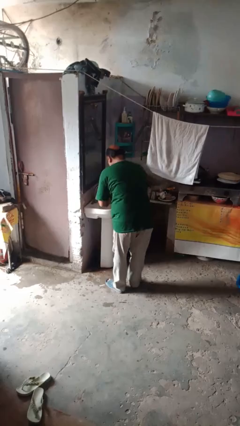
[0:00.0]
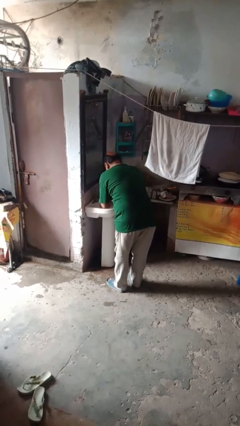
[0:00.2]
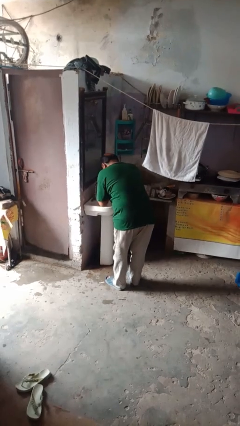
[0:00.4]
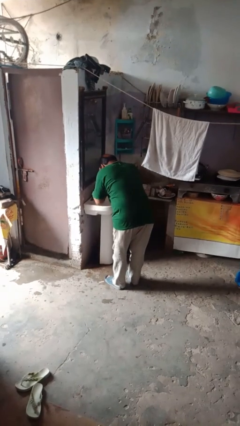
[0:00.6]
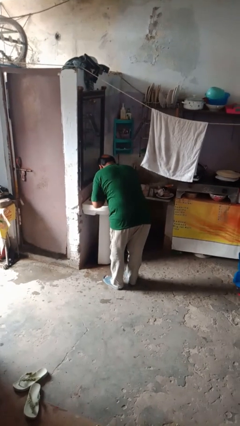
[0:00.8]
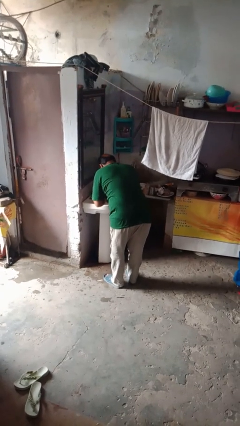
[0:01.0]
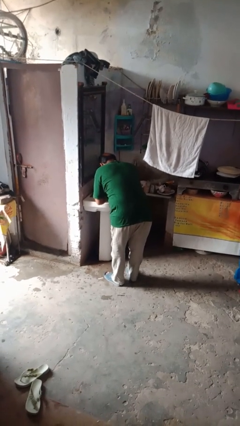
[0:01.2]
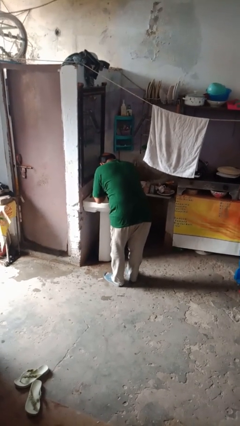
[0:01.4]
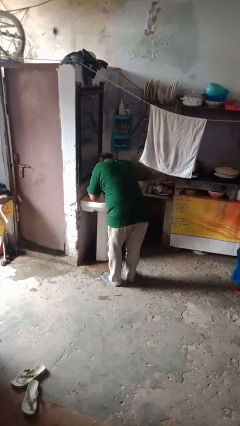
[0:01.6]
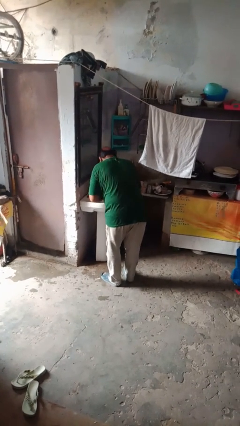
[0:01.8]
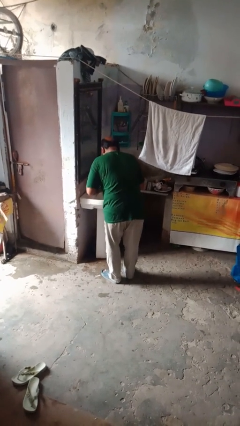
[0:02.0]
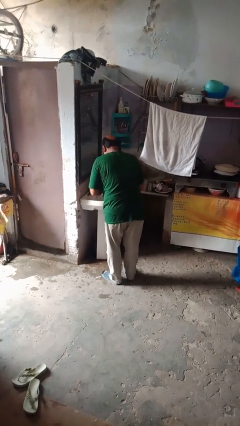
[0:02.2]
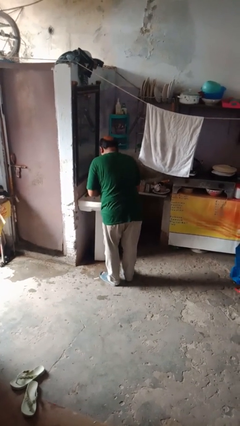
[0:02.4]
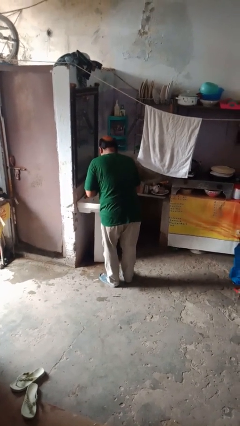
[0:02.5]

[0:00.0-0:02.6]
person washes face

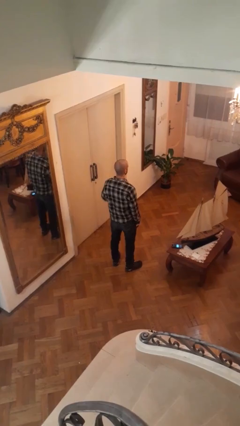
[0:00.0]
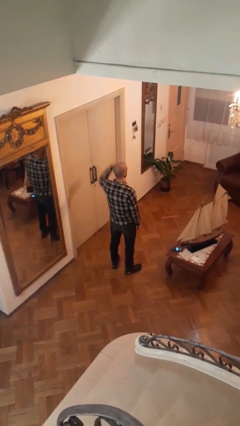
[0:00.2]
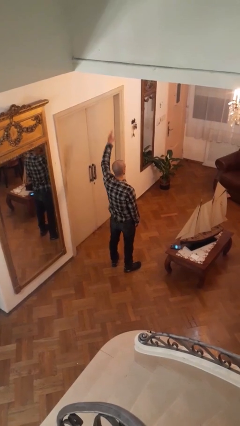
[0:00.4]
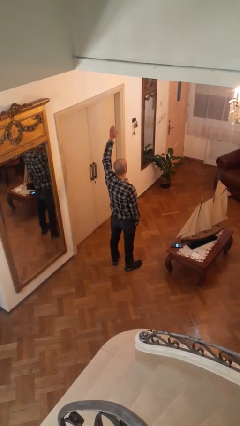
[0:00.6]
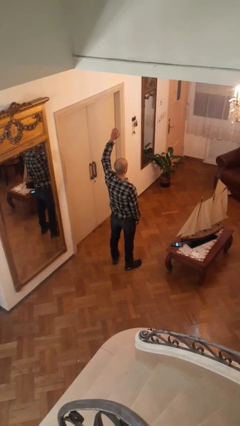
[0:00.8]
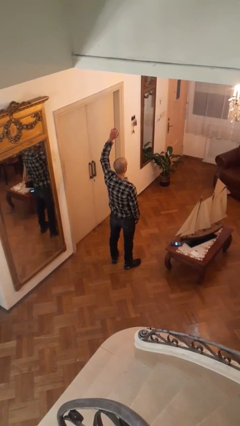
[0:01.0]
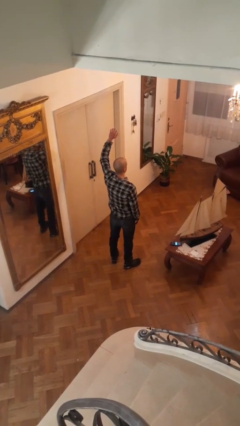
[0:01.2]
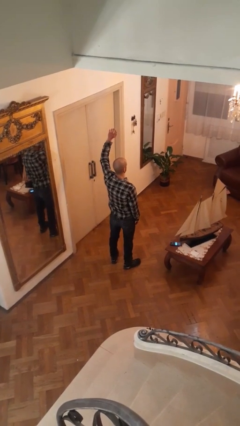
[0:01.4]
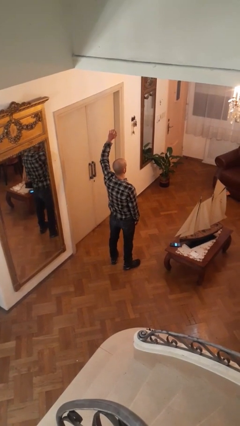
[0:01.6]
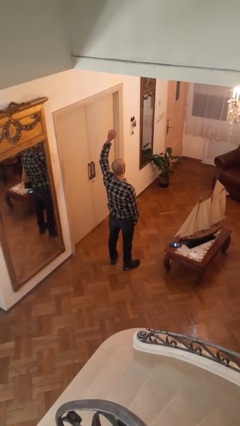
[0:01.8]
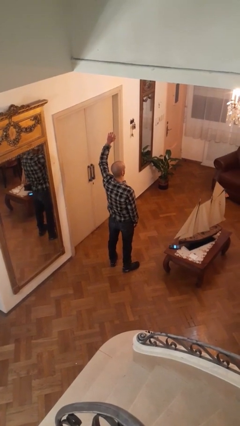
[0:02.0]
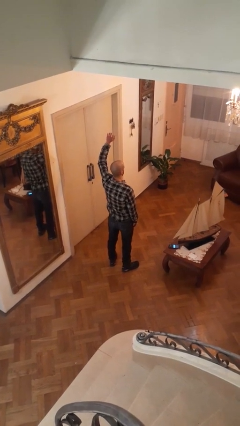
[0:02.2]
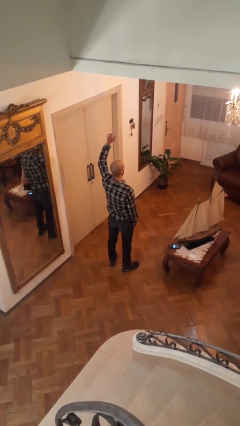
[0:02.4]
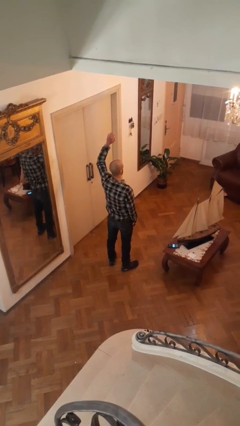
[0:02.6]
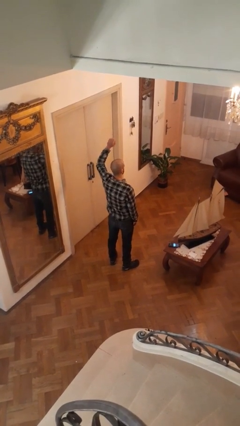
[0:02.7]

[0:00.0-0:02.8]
person gestures raise hand

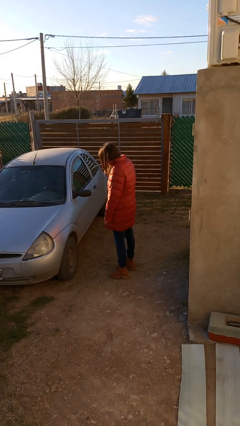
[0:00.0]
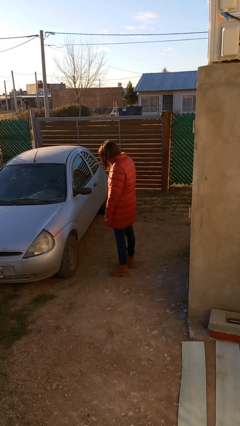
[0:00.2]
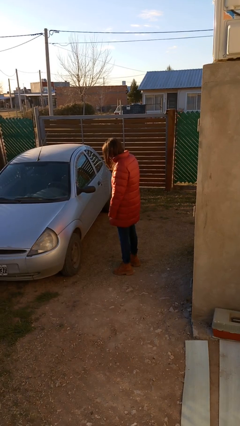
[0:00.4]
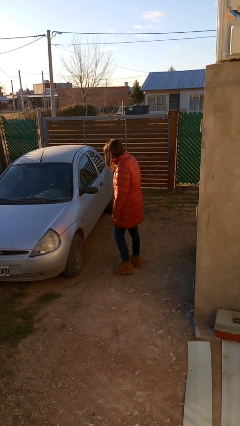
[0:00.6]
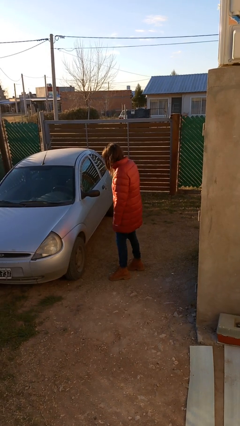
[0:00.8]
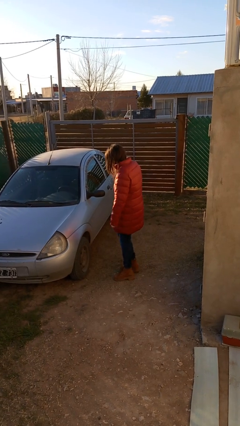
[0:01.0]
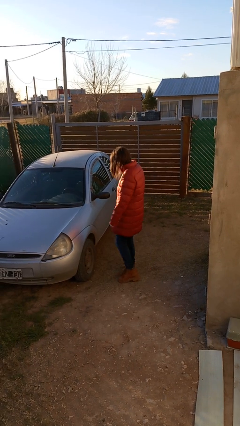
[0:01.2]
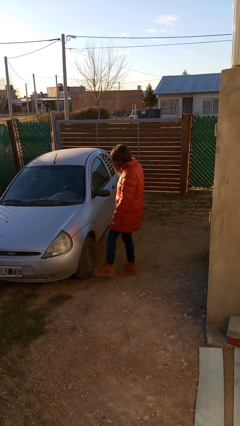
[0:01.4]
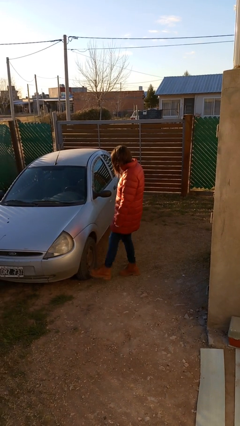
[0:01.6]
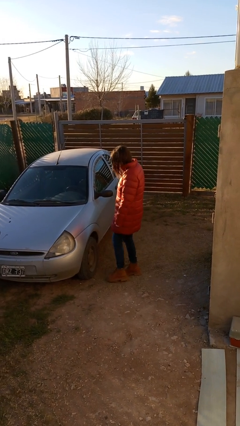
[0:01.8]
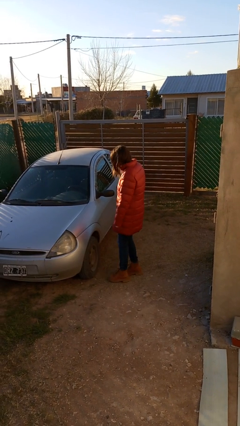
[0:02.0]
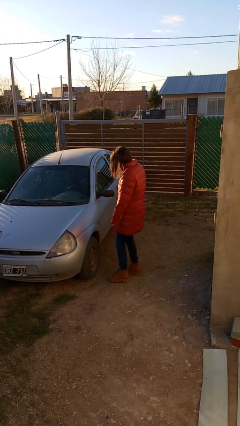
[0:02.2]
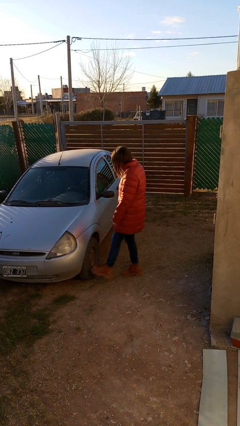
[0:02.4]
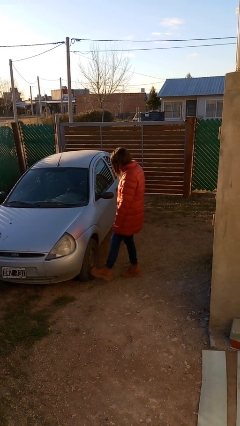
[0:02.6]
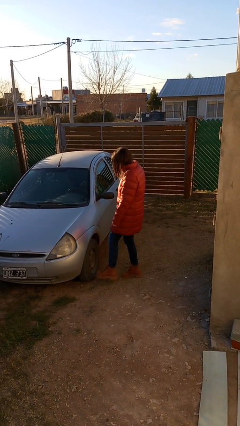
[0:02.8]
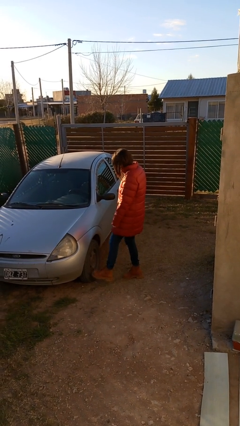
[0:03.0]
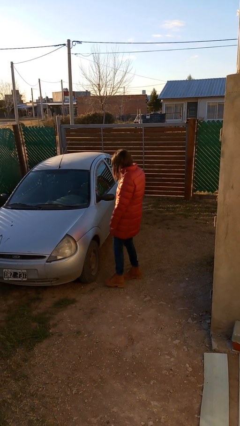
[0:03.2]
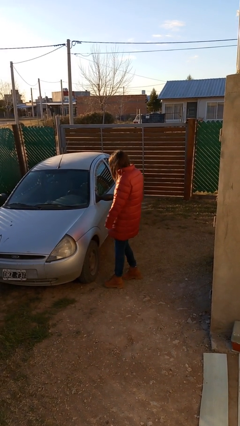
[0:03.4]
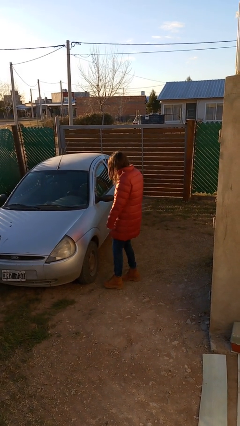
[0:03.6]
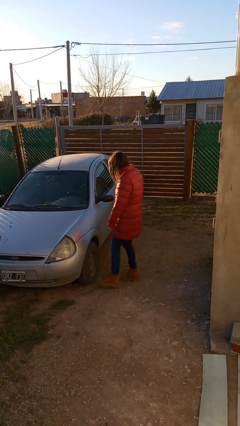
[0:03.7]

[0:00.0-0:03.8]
person kicks car tires

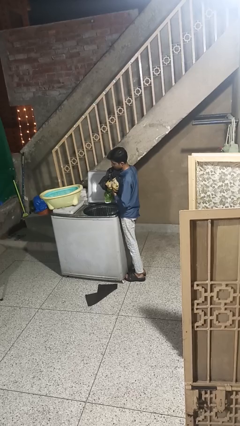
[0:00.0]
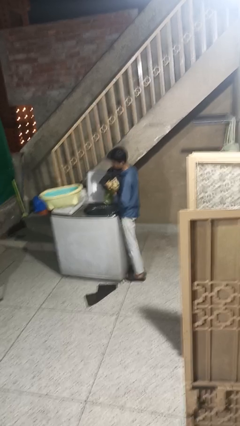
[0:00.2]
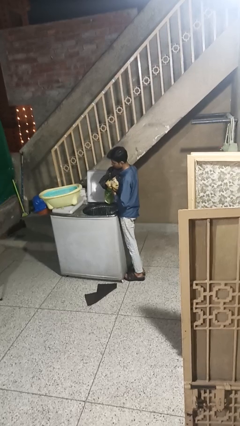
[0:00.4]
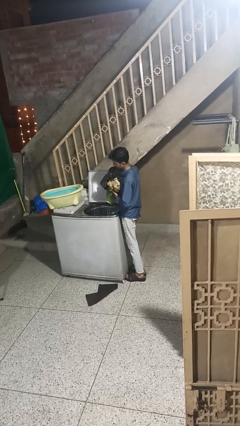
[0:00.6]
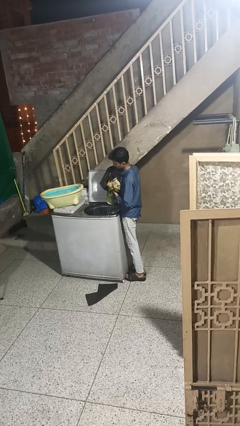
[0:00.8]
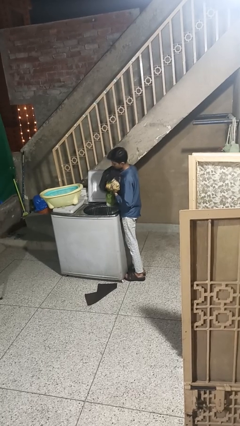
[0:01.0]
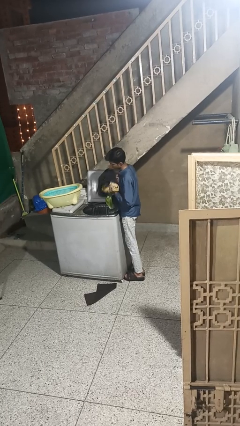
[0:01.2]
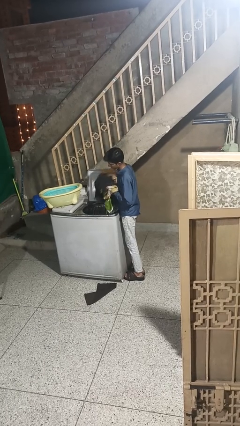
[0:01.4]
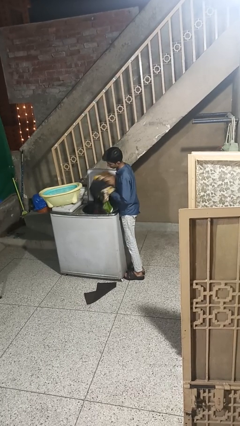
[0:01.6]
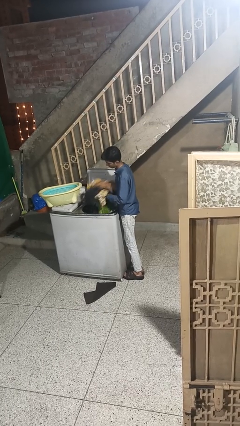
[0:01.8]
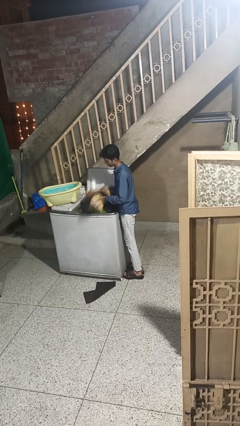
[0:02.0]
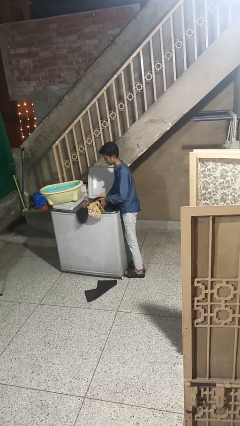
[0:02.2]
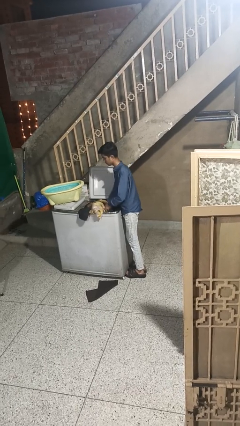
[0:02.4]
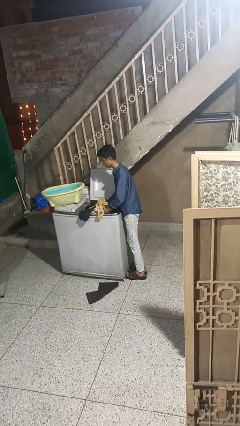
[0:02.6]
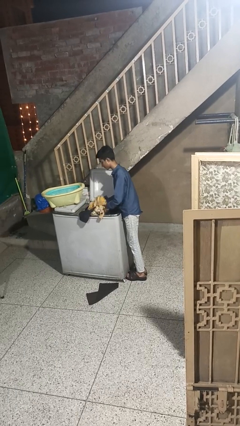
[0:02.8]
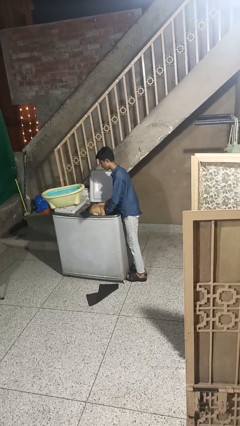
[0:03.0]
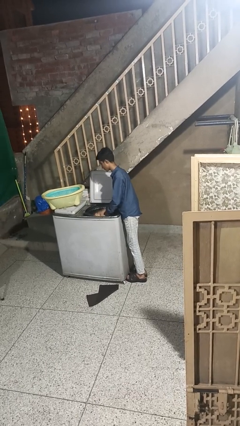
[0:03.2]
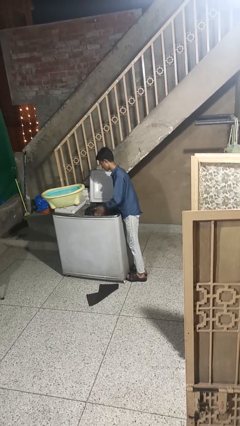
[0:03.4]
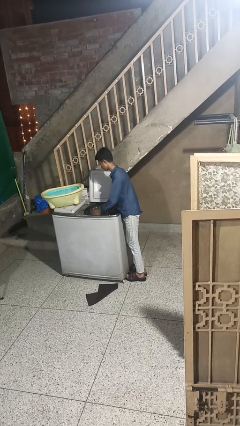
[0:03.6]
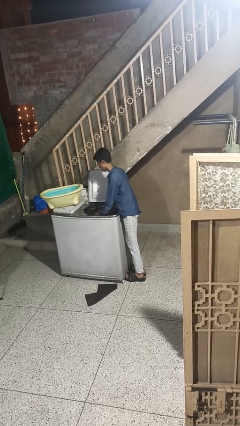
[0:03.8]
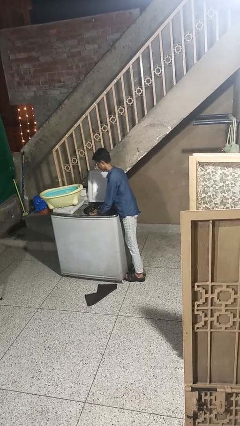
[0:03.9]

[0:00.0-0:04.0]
person unloads clotheswasher

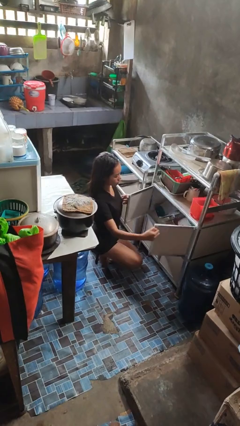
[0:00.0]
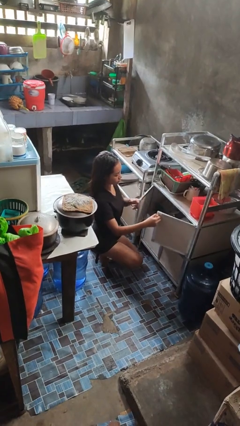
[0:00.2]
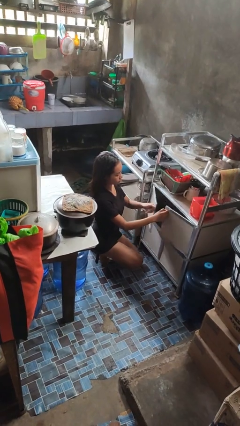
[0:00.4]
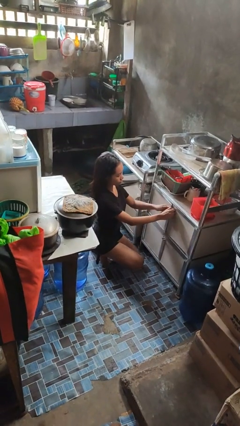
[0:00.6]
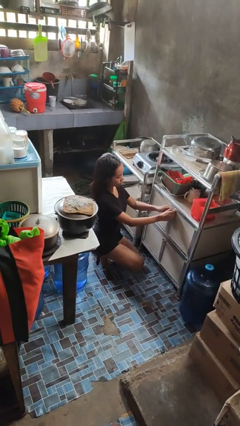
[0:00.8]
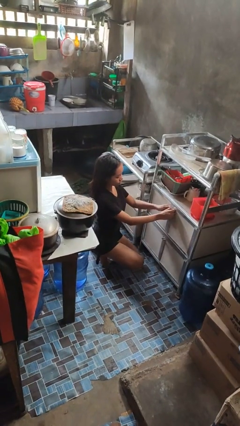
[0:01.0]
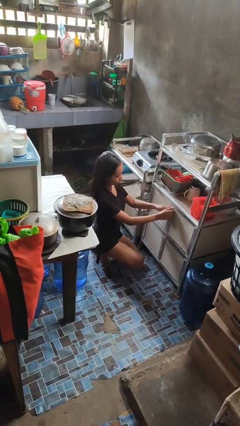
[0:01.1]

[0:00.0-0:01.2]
person closes cabinet

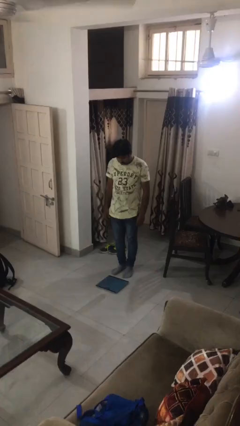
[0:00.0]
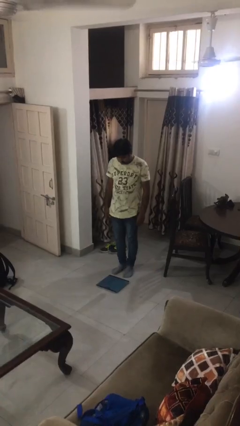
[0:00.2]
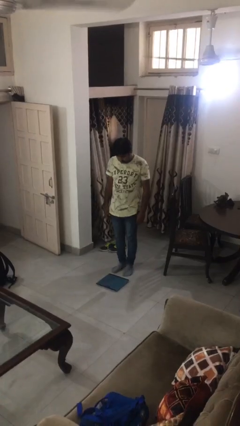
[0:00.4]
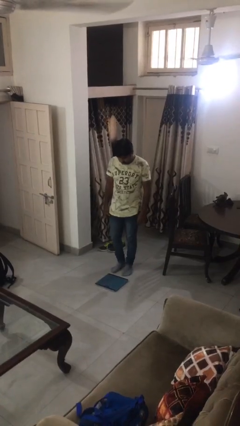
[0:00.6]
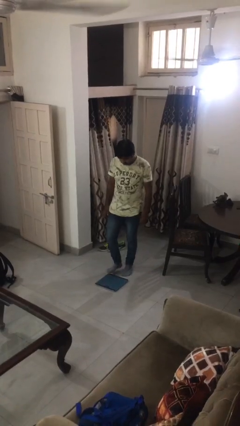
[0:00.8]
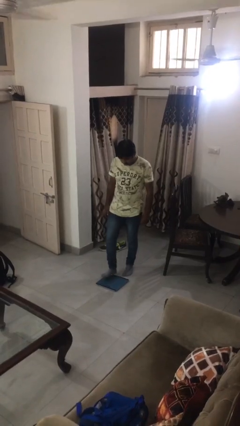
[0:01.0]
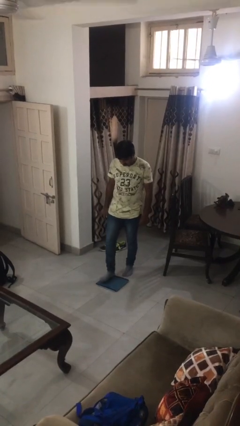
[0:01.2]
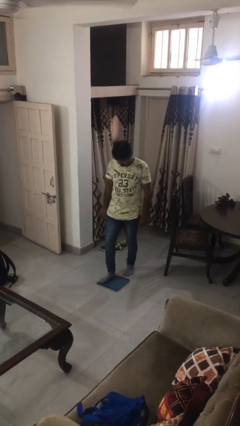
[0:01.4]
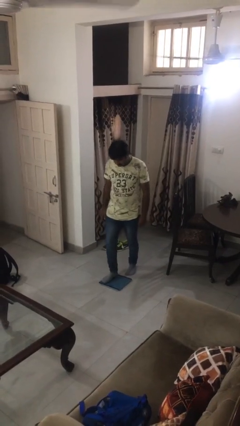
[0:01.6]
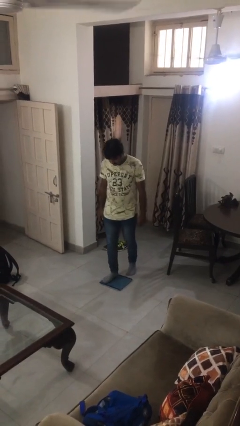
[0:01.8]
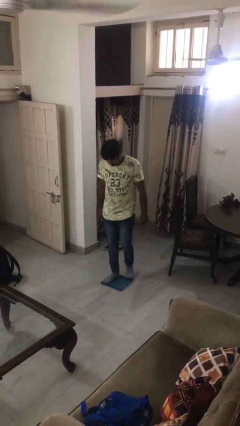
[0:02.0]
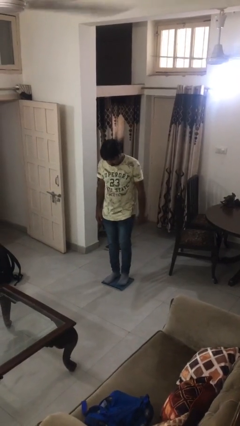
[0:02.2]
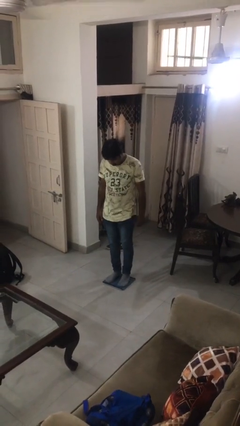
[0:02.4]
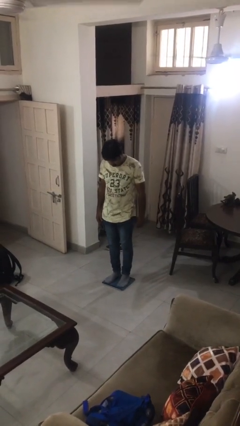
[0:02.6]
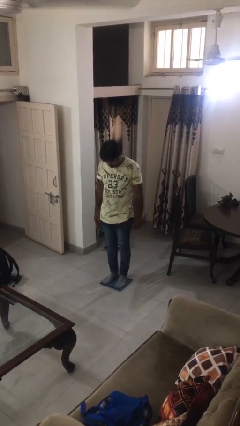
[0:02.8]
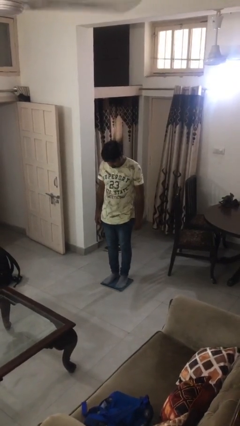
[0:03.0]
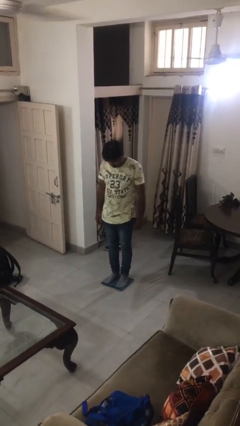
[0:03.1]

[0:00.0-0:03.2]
person uses bodyweight scale

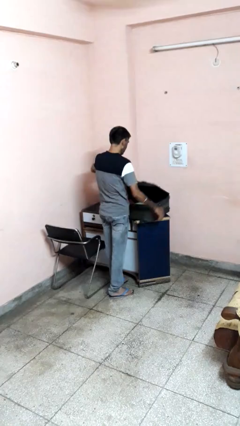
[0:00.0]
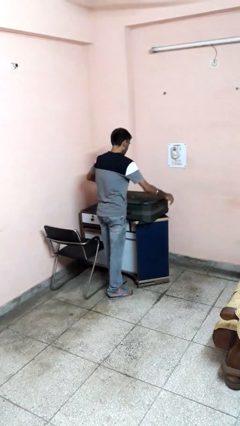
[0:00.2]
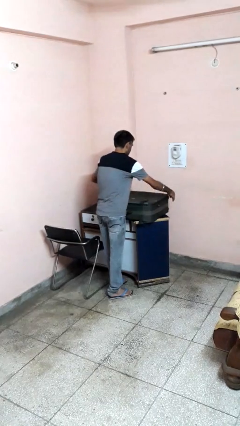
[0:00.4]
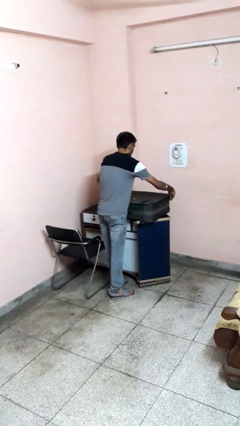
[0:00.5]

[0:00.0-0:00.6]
person closes suitcase
